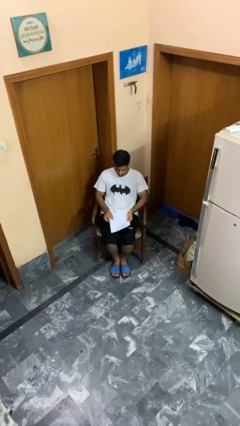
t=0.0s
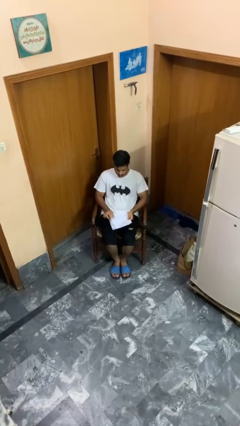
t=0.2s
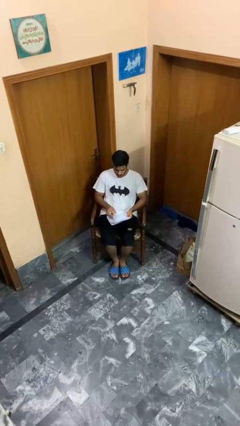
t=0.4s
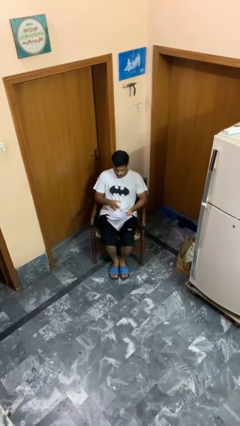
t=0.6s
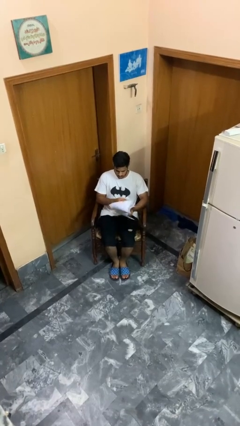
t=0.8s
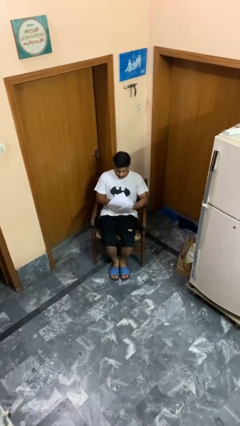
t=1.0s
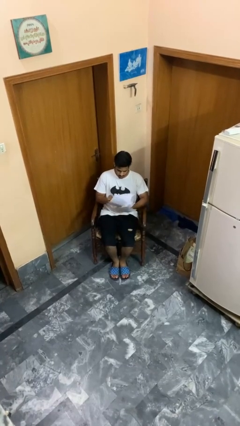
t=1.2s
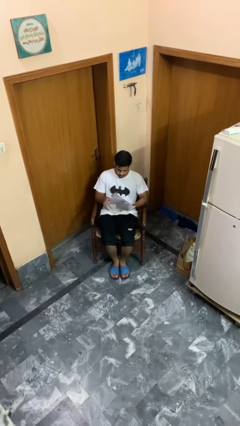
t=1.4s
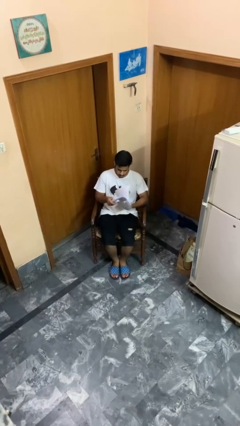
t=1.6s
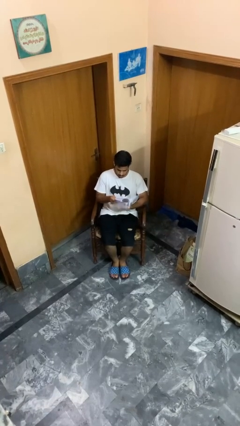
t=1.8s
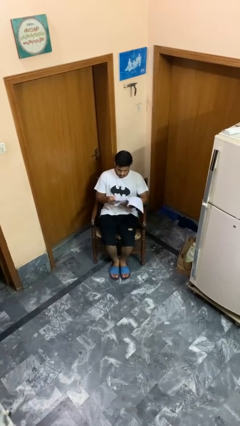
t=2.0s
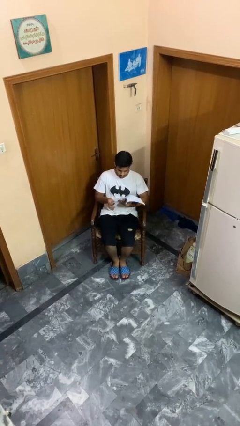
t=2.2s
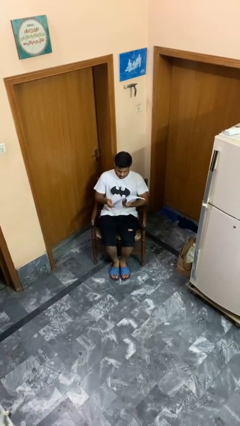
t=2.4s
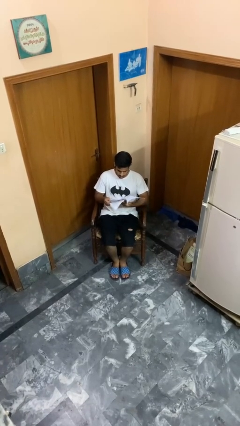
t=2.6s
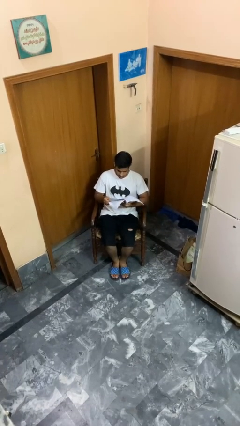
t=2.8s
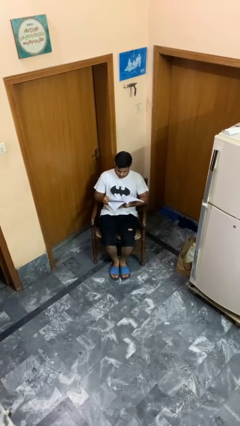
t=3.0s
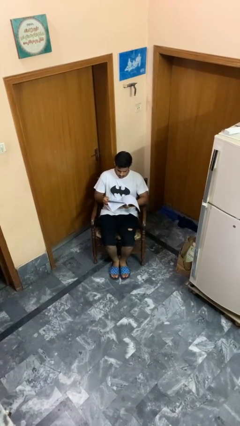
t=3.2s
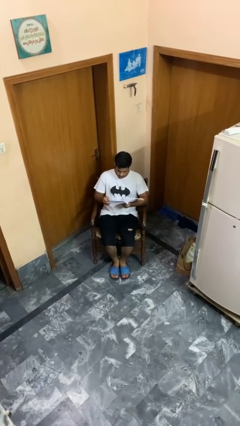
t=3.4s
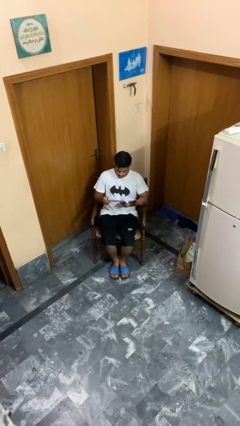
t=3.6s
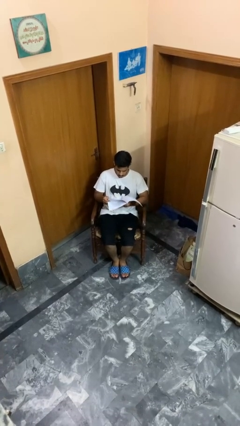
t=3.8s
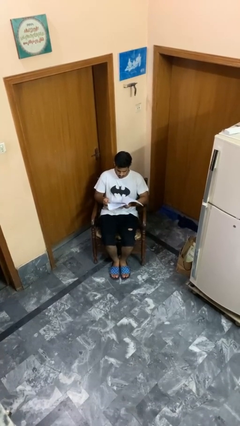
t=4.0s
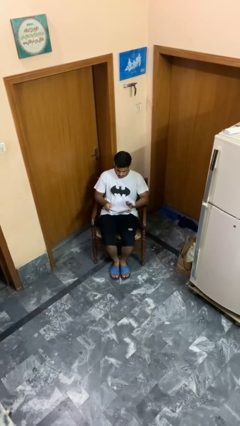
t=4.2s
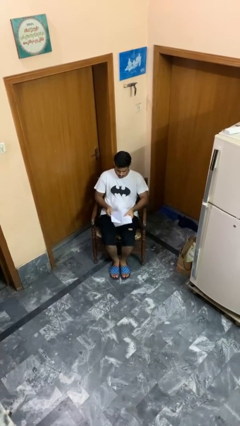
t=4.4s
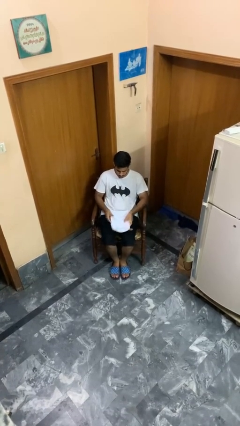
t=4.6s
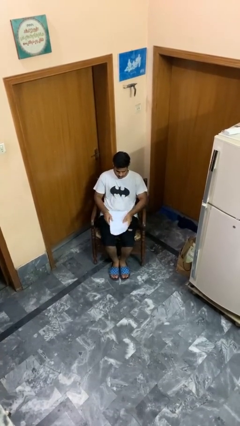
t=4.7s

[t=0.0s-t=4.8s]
person reads magazine

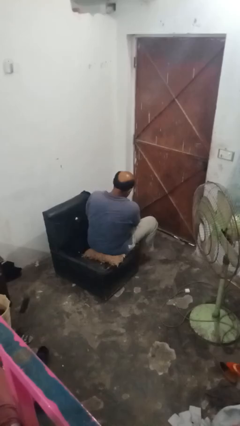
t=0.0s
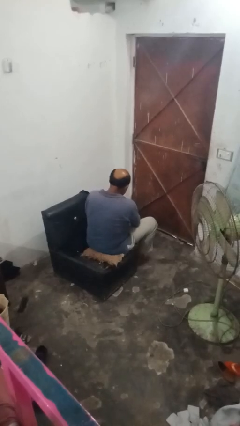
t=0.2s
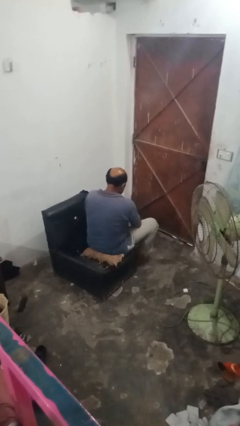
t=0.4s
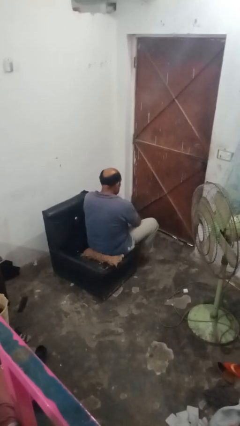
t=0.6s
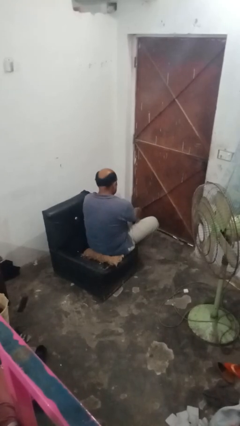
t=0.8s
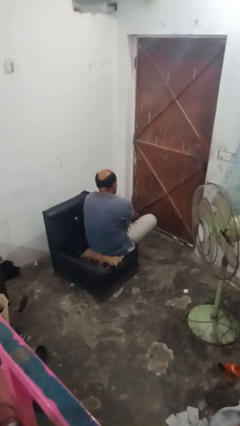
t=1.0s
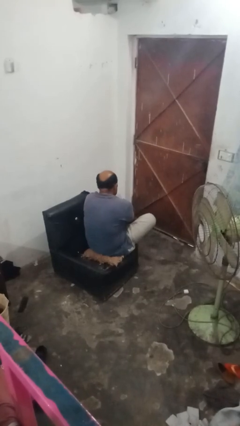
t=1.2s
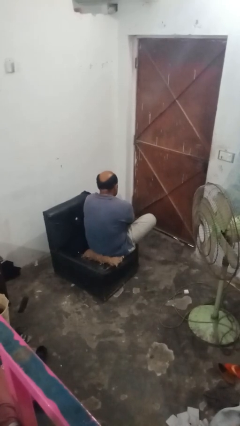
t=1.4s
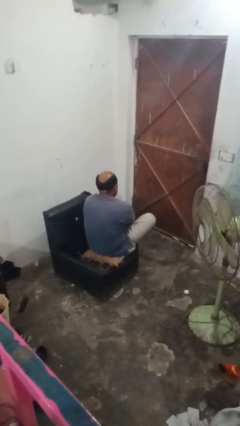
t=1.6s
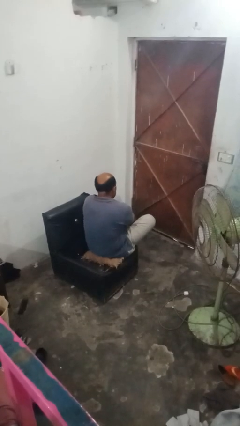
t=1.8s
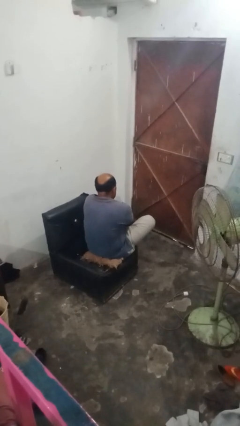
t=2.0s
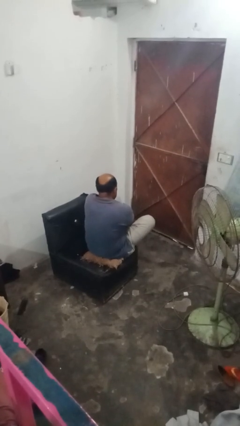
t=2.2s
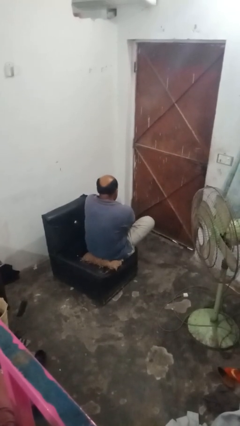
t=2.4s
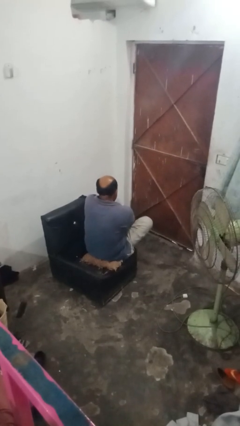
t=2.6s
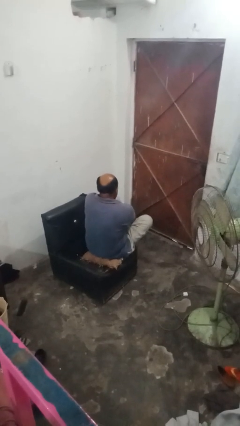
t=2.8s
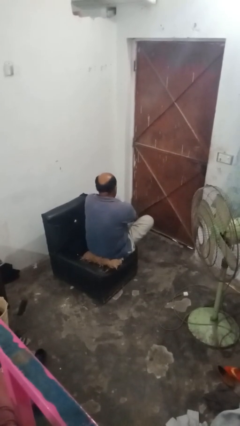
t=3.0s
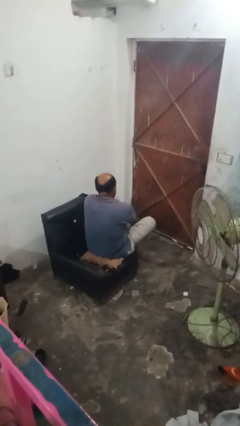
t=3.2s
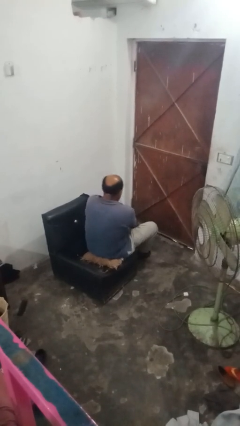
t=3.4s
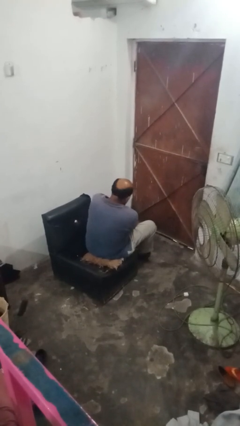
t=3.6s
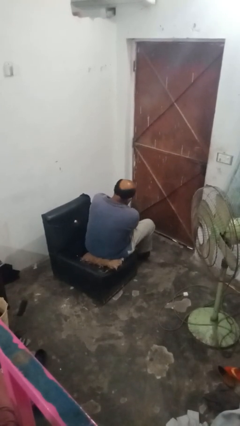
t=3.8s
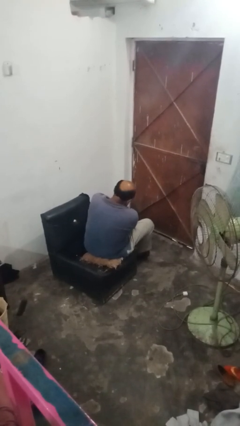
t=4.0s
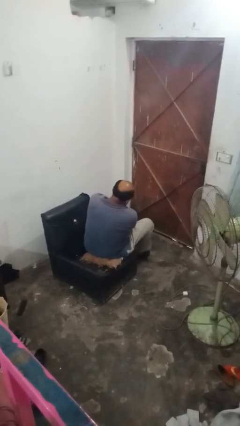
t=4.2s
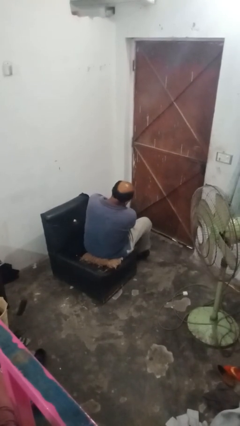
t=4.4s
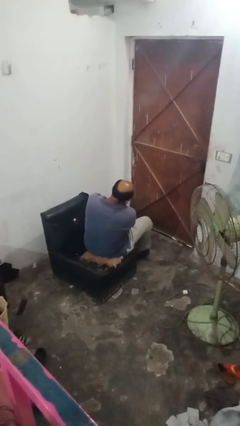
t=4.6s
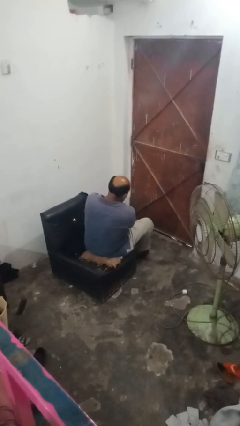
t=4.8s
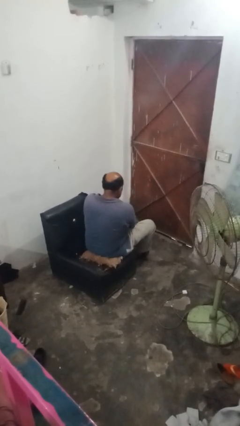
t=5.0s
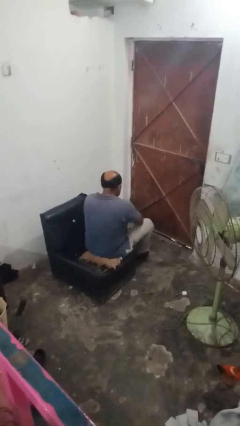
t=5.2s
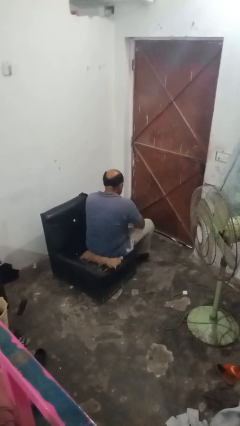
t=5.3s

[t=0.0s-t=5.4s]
person puts on socks

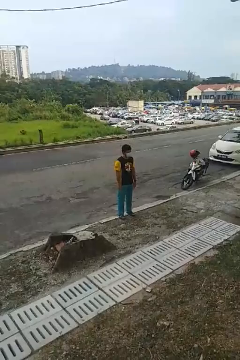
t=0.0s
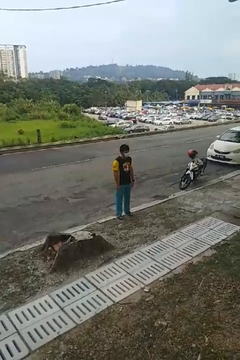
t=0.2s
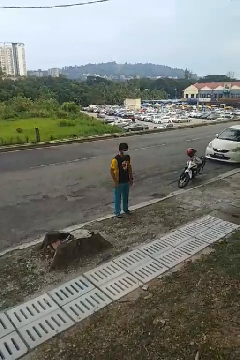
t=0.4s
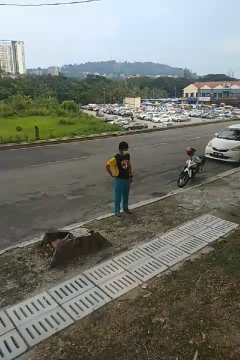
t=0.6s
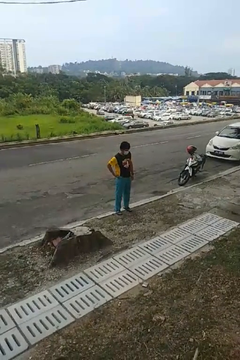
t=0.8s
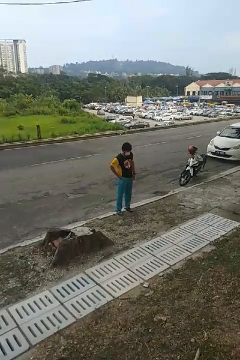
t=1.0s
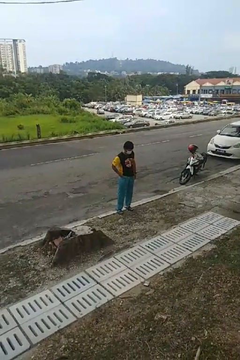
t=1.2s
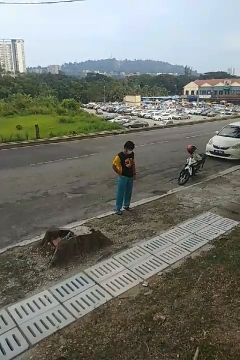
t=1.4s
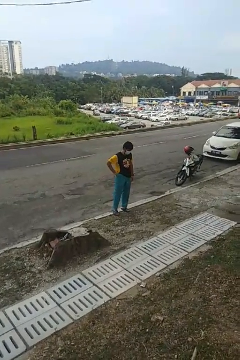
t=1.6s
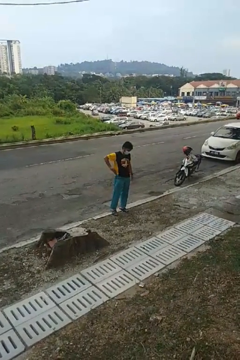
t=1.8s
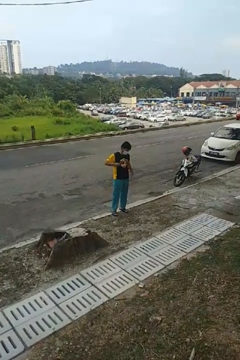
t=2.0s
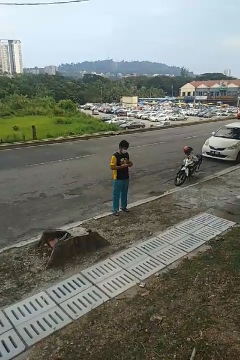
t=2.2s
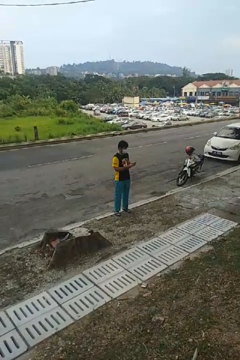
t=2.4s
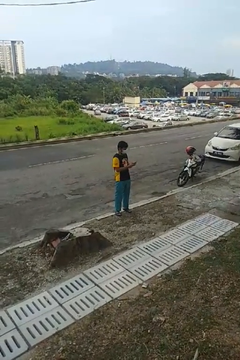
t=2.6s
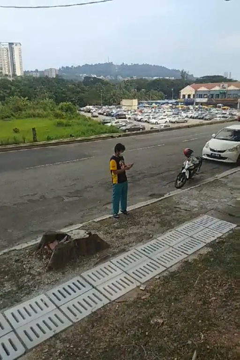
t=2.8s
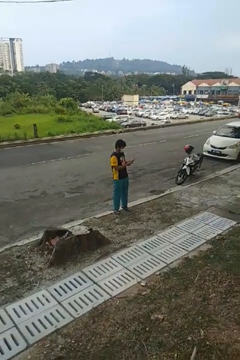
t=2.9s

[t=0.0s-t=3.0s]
person takes phone from pocket

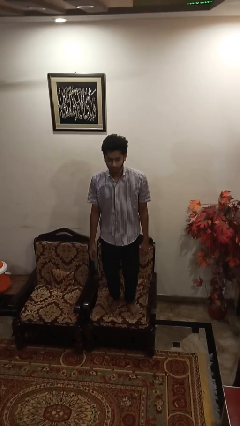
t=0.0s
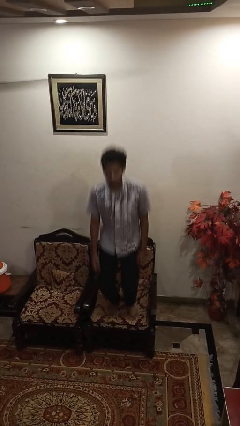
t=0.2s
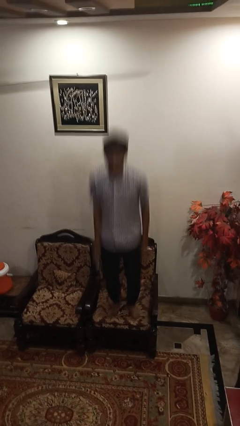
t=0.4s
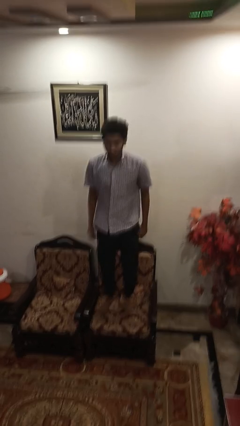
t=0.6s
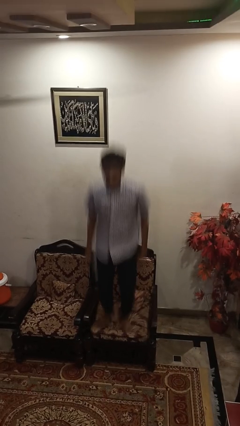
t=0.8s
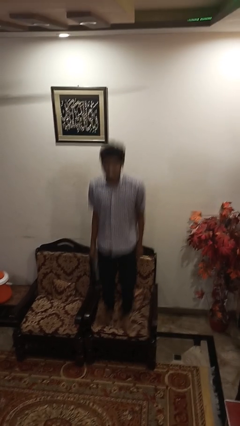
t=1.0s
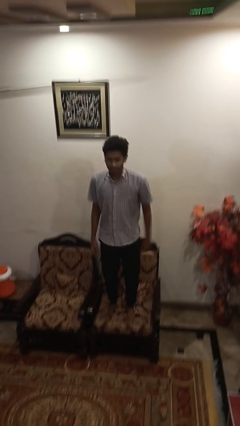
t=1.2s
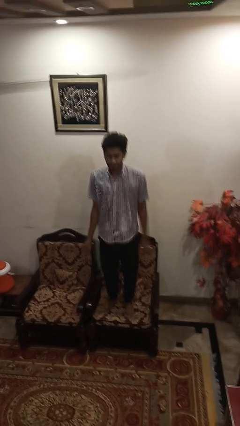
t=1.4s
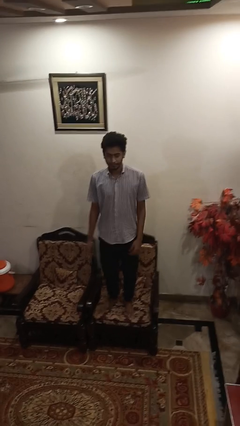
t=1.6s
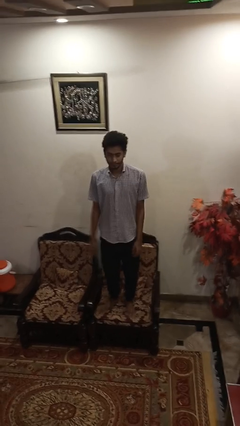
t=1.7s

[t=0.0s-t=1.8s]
person jumps on couch

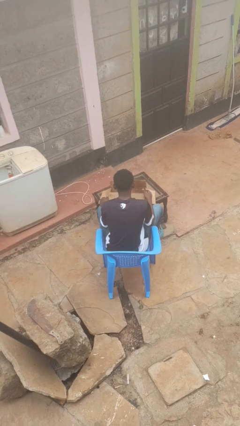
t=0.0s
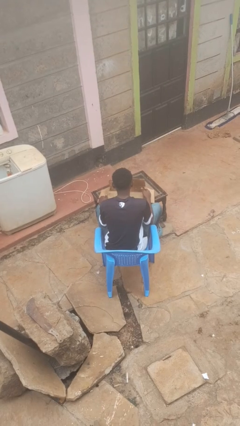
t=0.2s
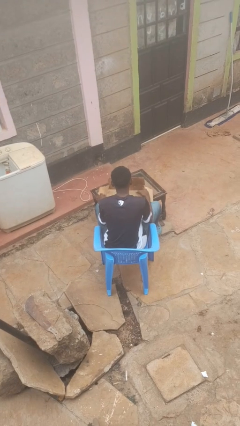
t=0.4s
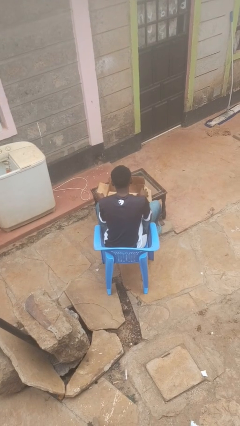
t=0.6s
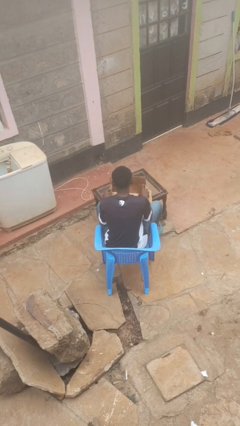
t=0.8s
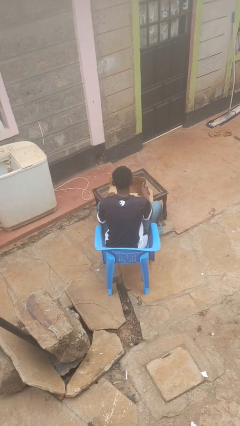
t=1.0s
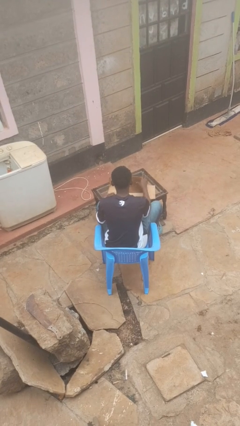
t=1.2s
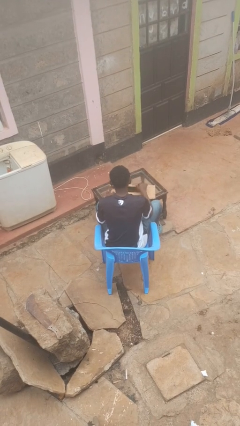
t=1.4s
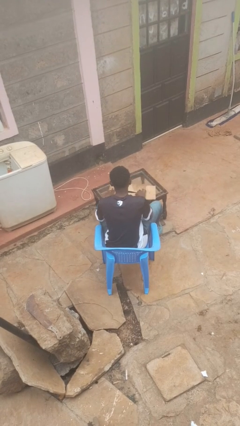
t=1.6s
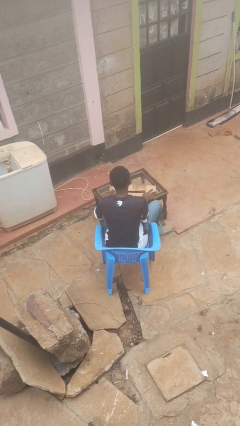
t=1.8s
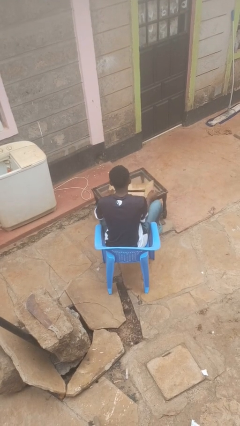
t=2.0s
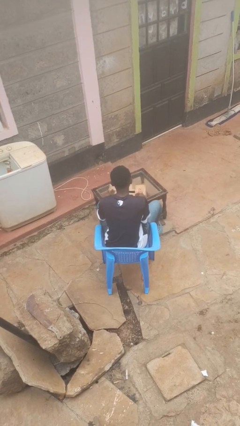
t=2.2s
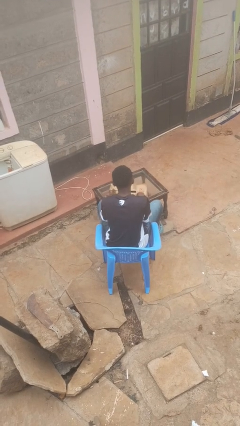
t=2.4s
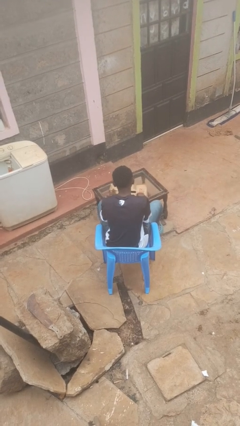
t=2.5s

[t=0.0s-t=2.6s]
person closes box

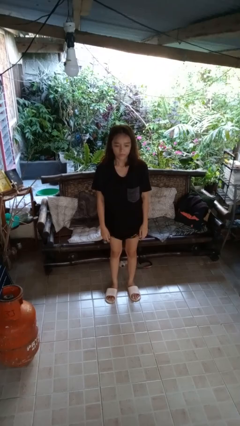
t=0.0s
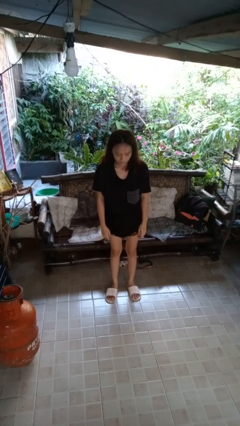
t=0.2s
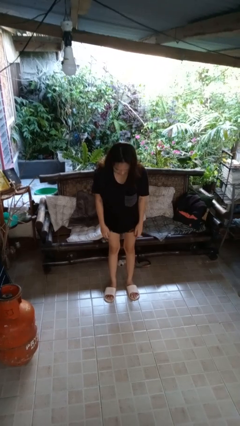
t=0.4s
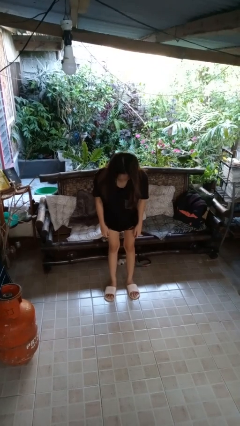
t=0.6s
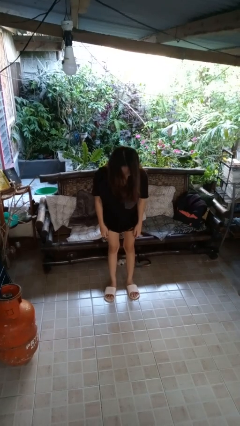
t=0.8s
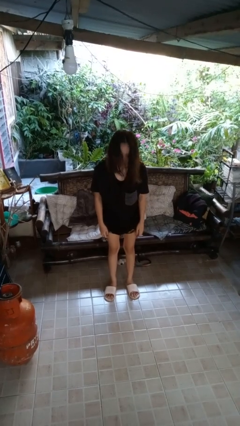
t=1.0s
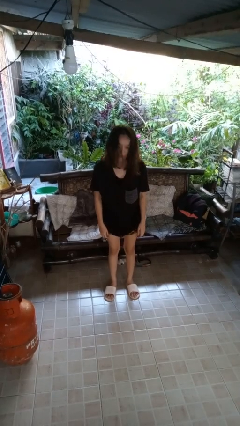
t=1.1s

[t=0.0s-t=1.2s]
person bows
